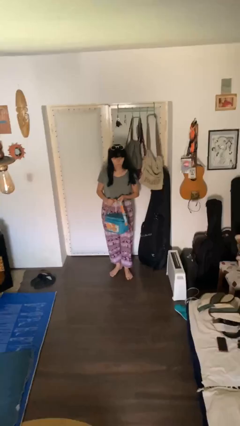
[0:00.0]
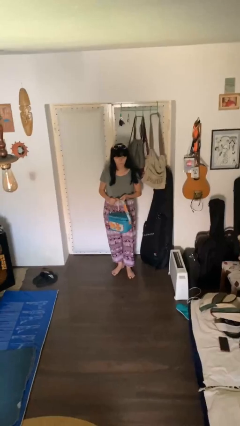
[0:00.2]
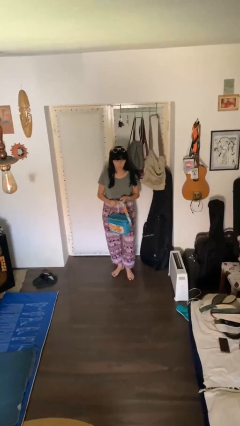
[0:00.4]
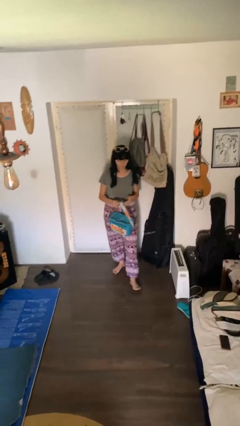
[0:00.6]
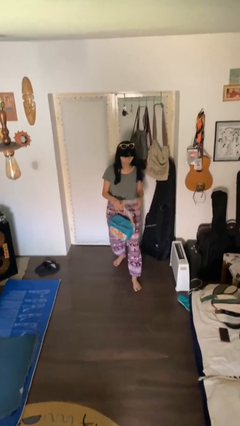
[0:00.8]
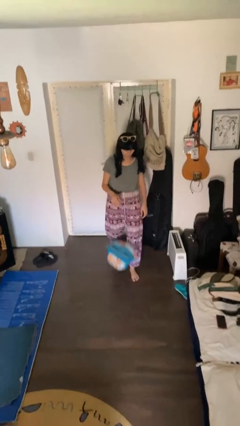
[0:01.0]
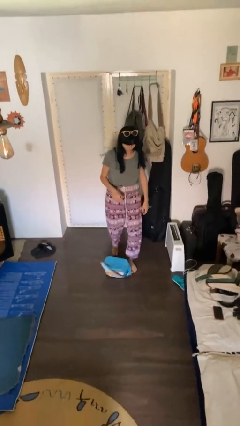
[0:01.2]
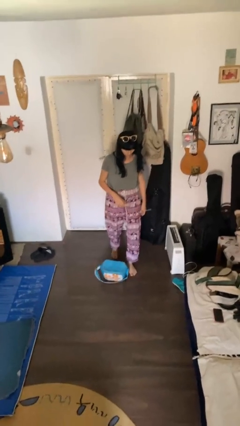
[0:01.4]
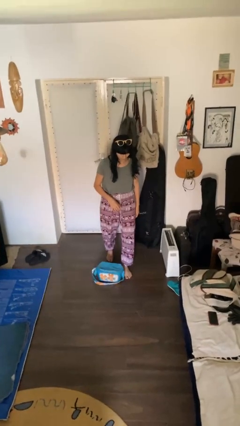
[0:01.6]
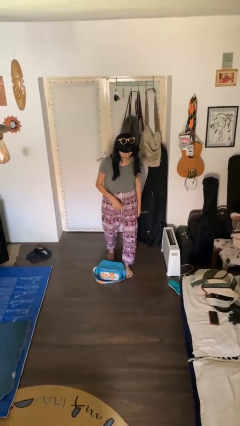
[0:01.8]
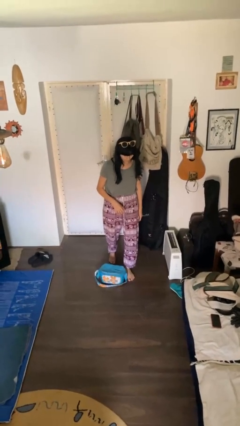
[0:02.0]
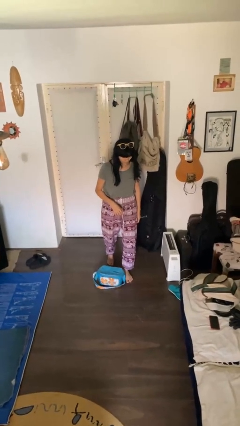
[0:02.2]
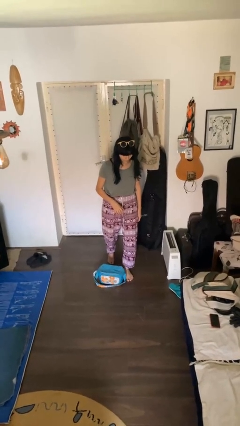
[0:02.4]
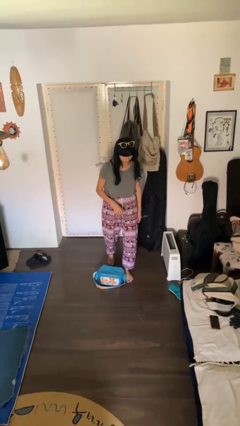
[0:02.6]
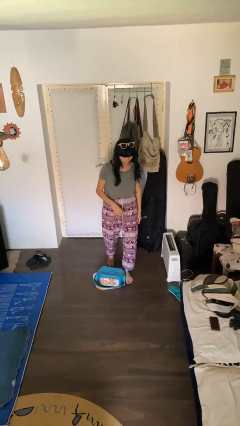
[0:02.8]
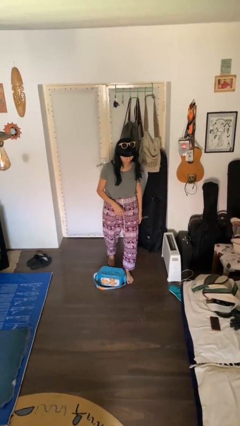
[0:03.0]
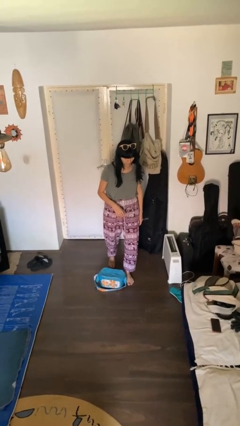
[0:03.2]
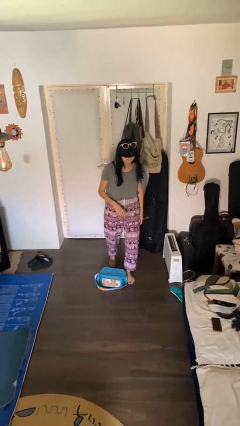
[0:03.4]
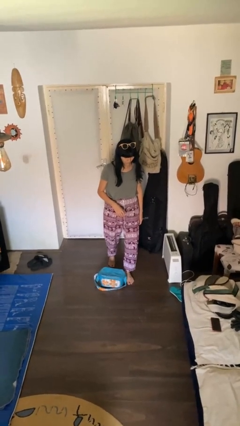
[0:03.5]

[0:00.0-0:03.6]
person drops object

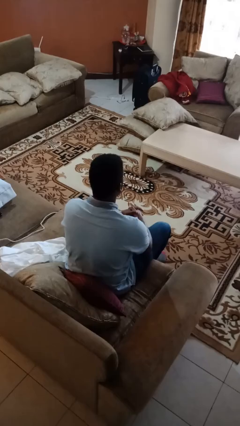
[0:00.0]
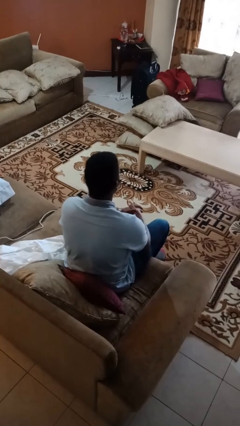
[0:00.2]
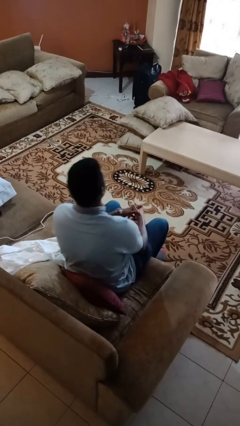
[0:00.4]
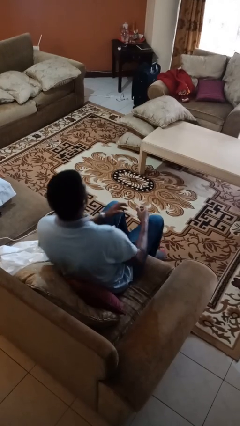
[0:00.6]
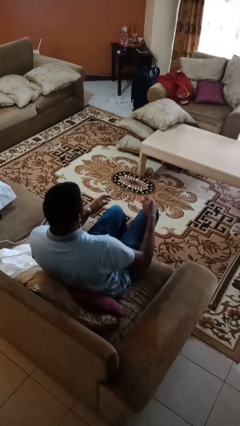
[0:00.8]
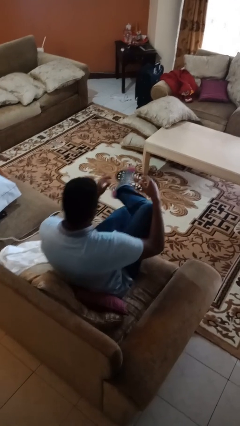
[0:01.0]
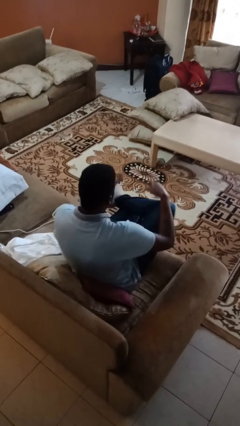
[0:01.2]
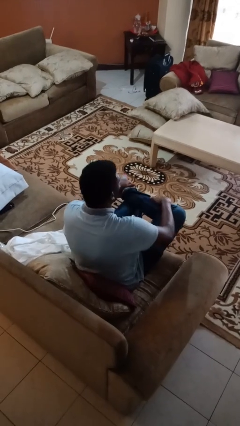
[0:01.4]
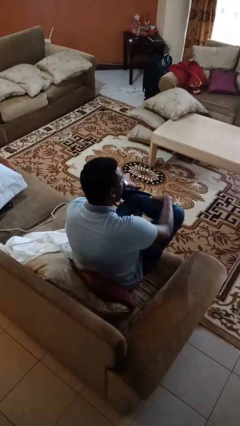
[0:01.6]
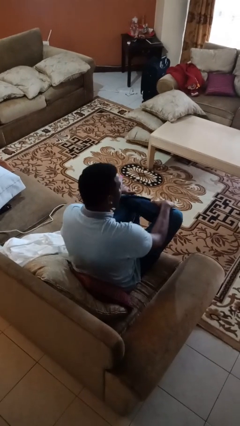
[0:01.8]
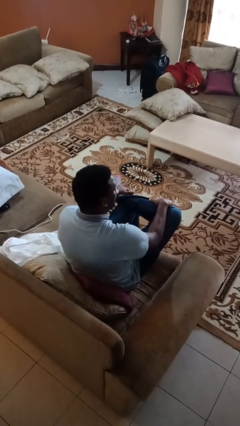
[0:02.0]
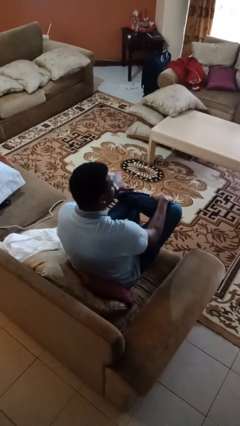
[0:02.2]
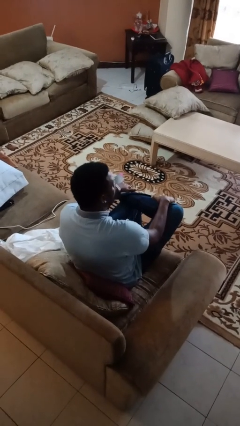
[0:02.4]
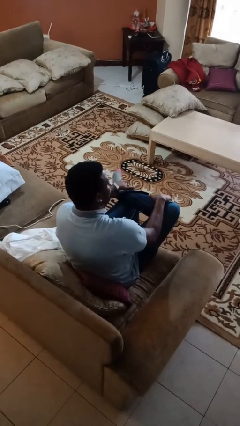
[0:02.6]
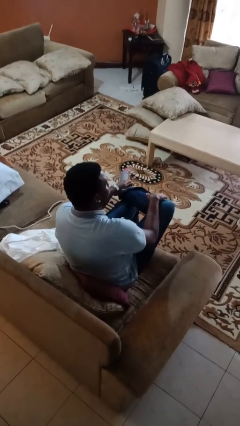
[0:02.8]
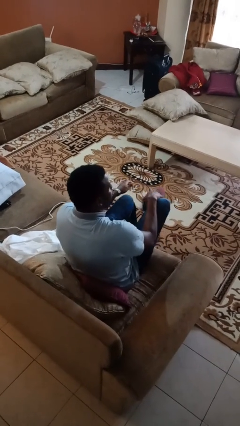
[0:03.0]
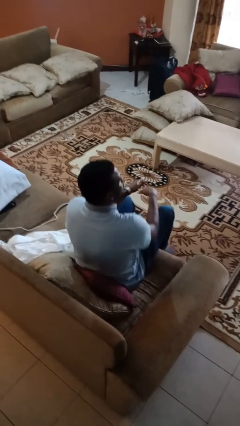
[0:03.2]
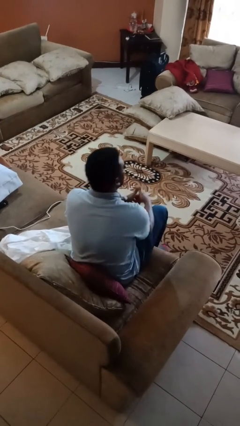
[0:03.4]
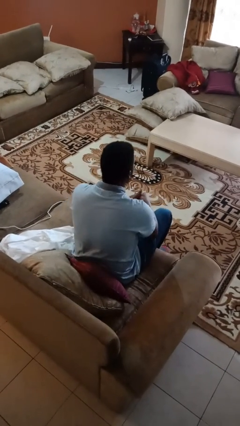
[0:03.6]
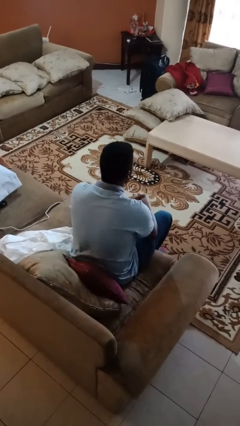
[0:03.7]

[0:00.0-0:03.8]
person crosses legs

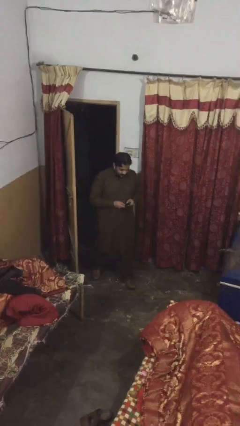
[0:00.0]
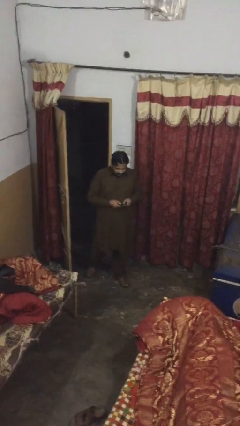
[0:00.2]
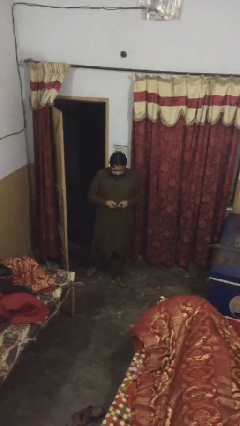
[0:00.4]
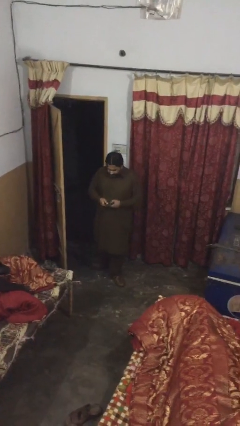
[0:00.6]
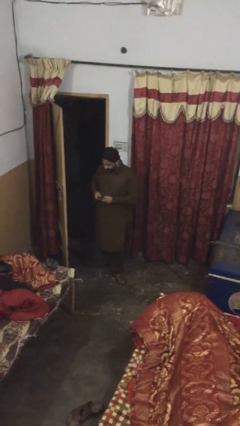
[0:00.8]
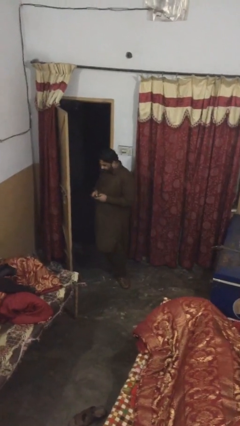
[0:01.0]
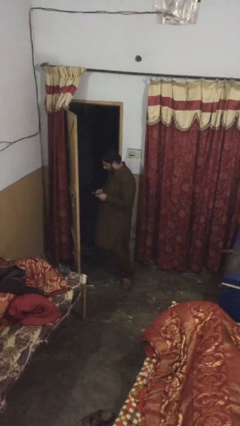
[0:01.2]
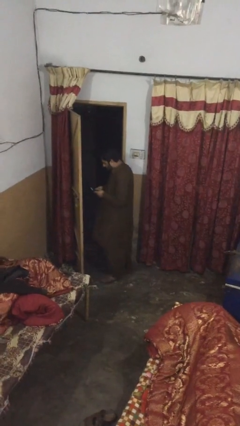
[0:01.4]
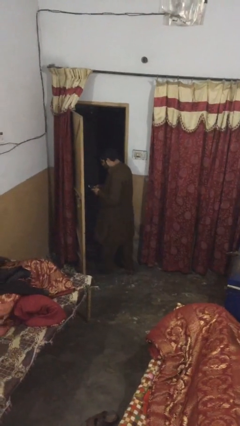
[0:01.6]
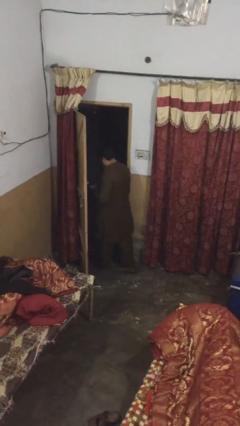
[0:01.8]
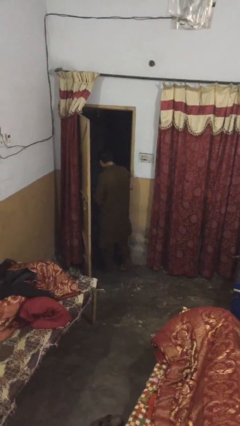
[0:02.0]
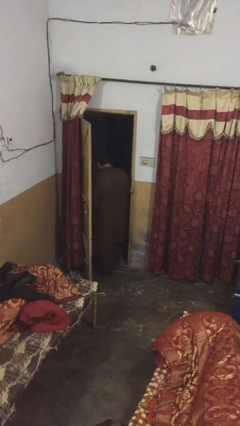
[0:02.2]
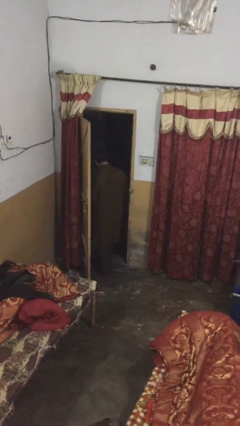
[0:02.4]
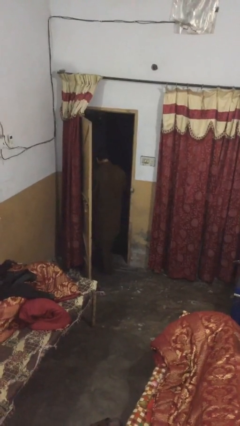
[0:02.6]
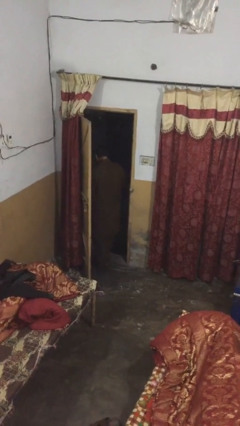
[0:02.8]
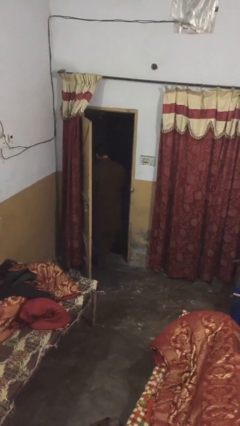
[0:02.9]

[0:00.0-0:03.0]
person exits scene through structure

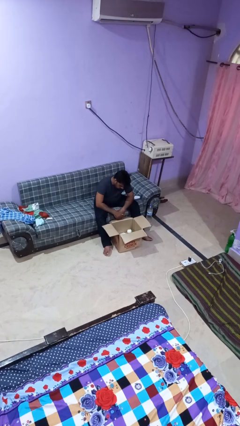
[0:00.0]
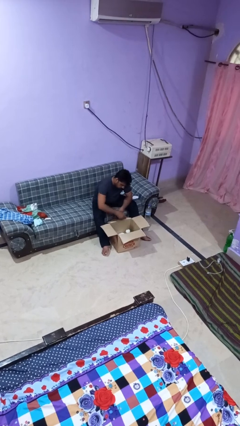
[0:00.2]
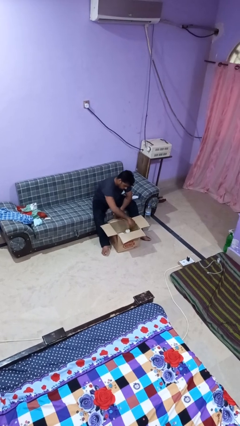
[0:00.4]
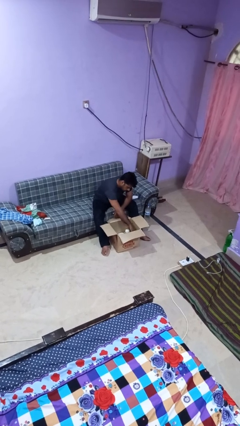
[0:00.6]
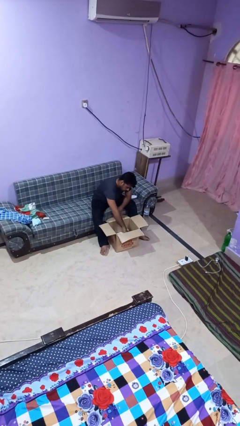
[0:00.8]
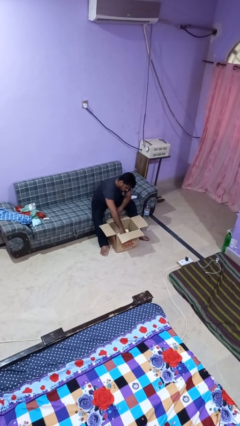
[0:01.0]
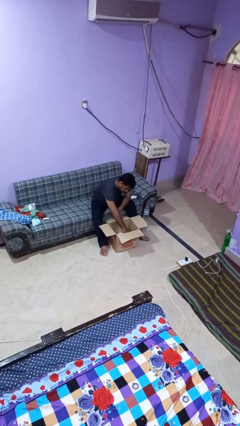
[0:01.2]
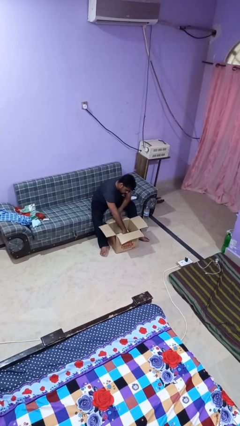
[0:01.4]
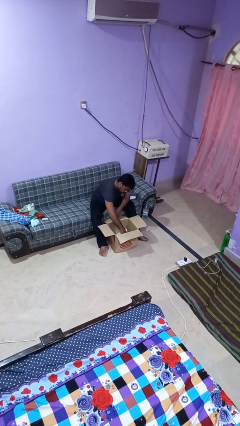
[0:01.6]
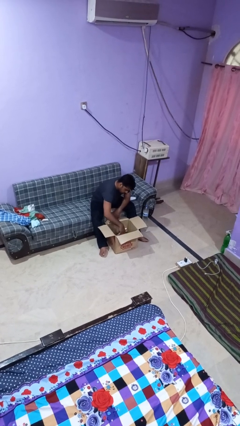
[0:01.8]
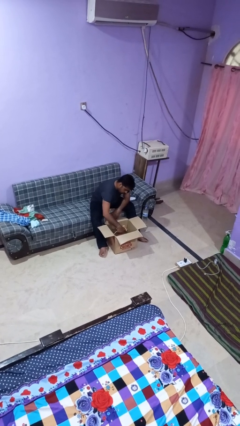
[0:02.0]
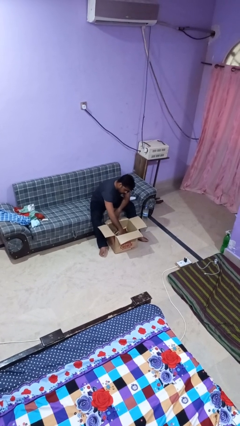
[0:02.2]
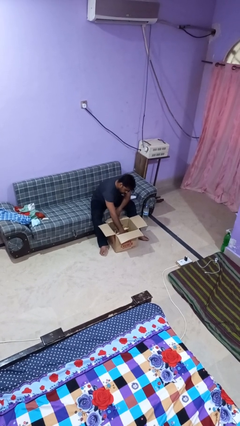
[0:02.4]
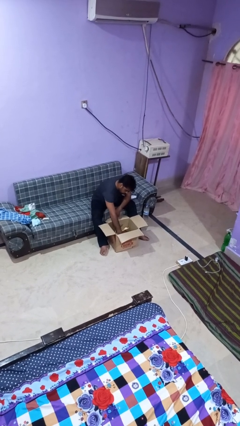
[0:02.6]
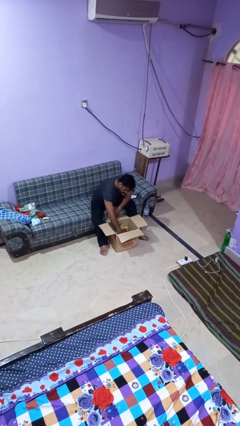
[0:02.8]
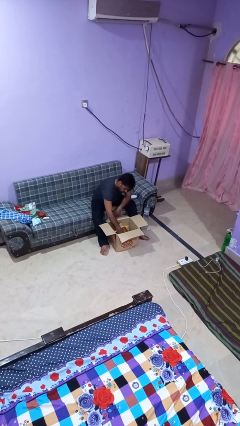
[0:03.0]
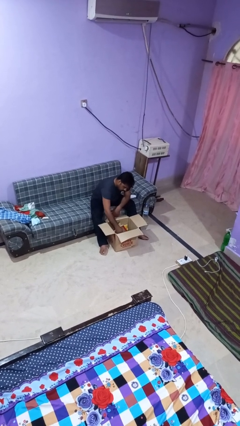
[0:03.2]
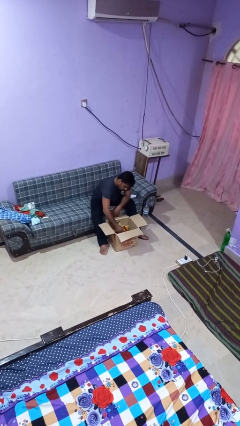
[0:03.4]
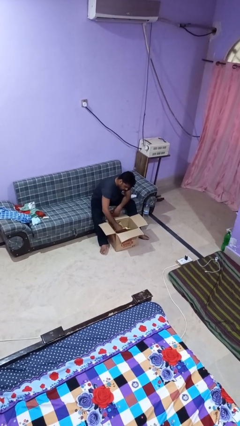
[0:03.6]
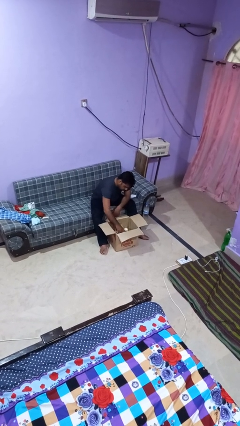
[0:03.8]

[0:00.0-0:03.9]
person searches in box

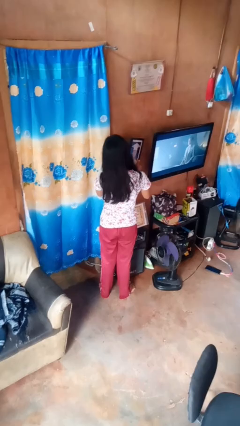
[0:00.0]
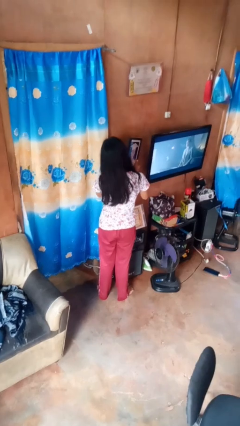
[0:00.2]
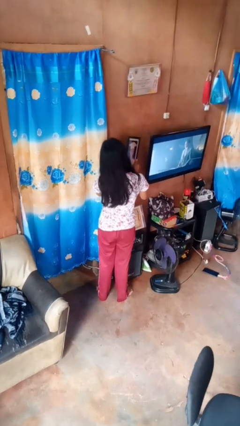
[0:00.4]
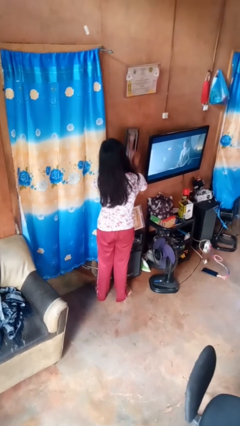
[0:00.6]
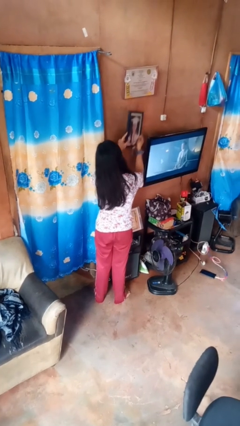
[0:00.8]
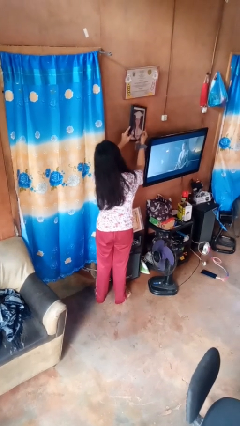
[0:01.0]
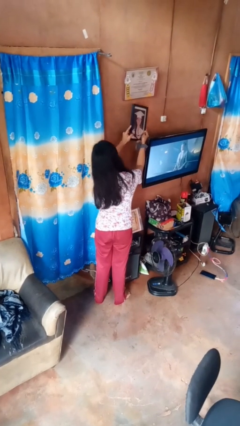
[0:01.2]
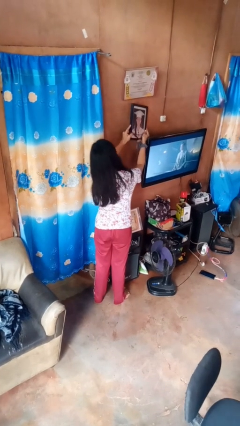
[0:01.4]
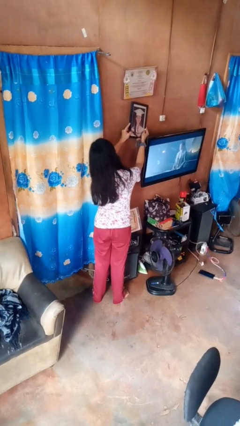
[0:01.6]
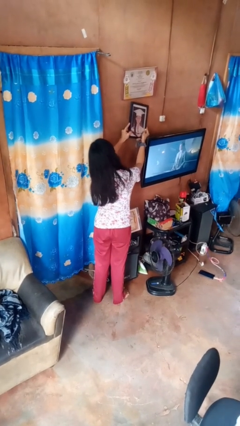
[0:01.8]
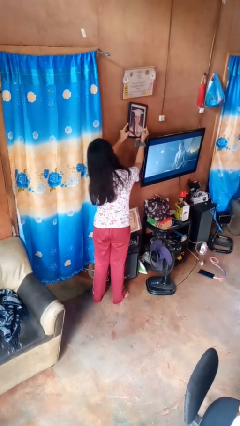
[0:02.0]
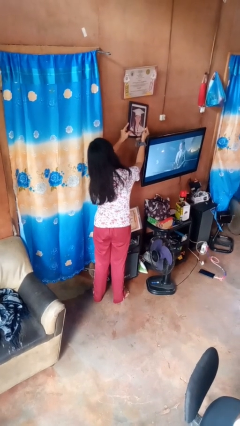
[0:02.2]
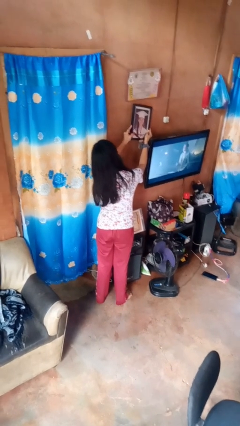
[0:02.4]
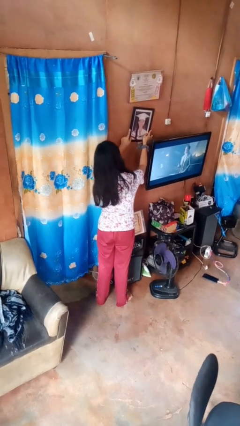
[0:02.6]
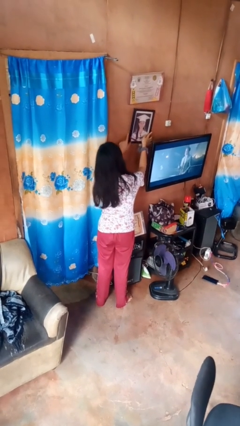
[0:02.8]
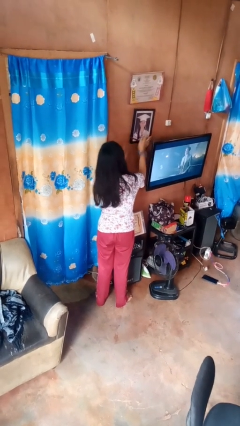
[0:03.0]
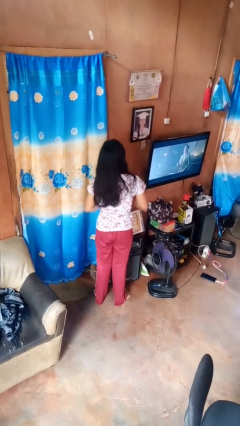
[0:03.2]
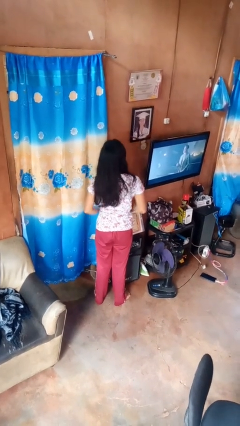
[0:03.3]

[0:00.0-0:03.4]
person puts up picture frame
